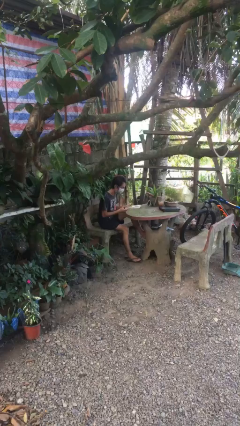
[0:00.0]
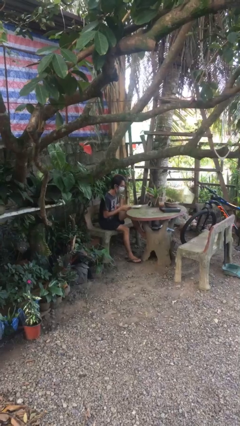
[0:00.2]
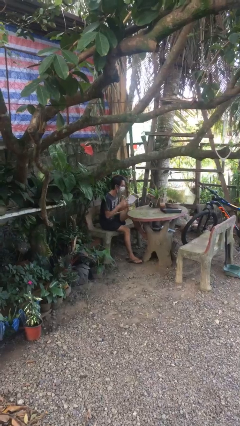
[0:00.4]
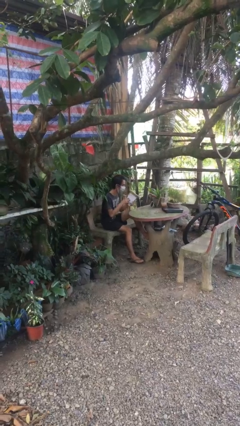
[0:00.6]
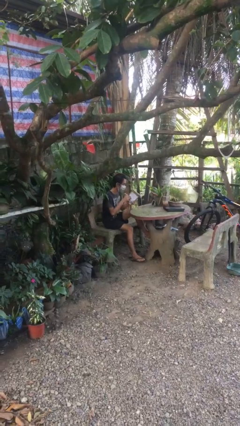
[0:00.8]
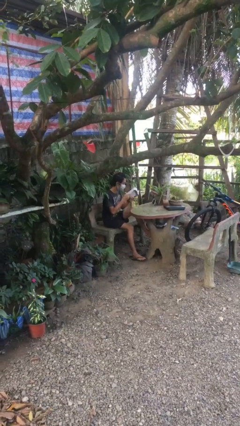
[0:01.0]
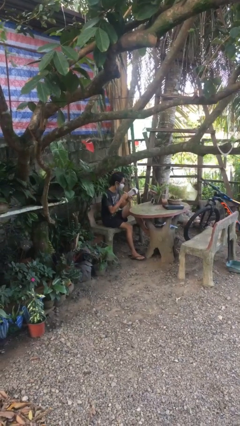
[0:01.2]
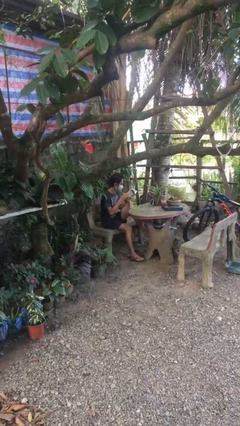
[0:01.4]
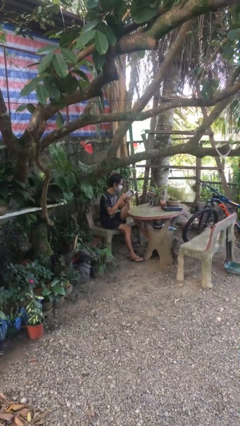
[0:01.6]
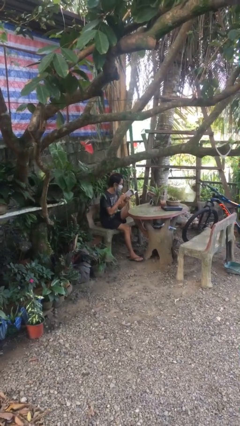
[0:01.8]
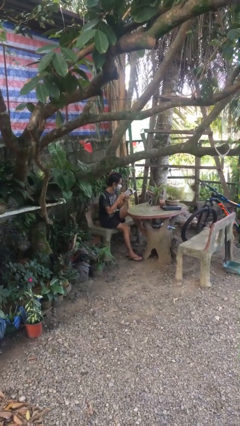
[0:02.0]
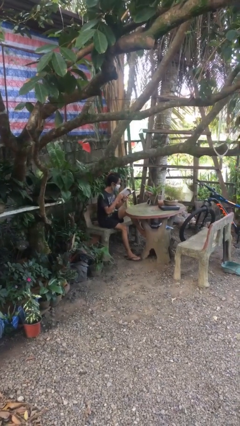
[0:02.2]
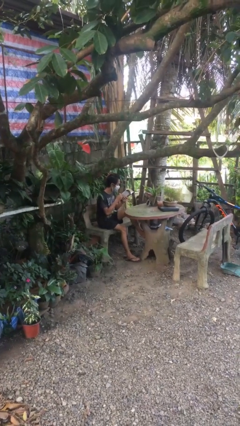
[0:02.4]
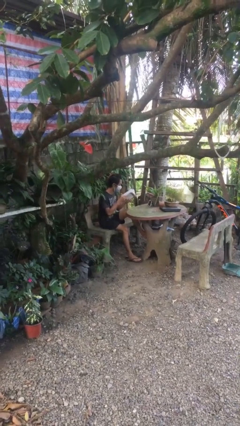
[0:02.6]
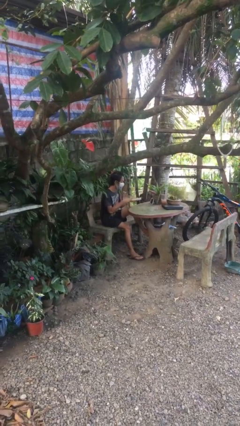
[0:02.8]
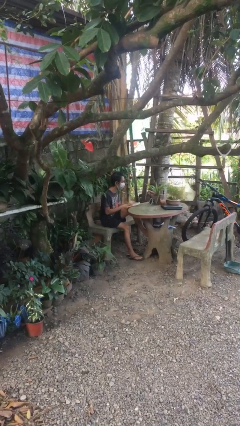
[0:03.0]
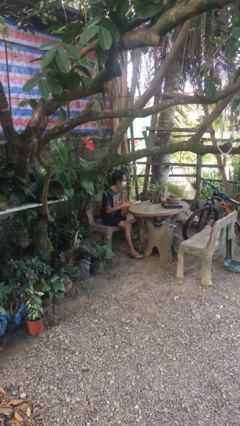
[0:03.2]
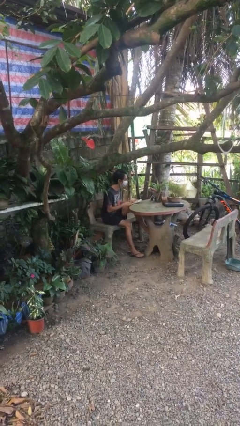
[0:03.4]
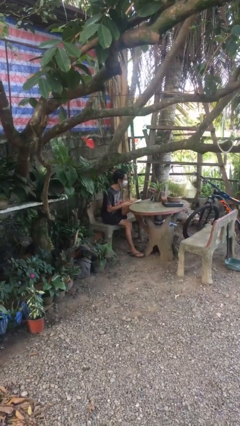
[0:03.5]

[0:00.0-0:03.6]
person reads document

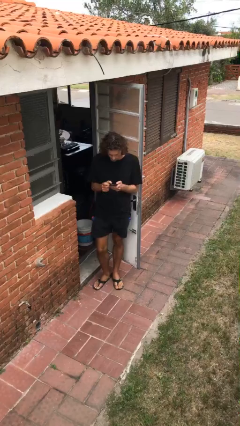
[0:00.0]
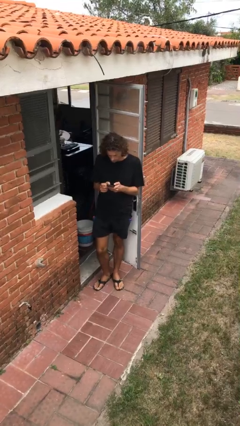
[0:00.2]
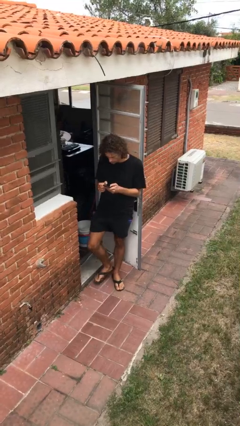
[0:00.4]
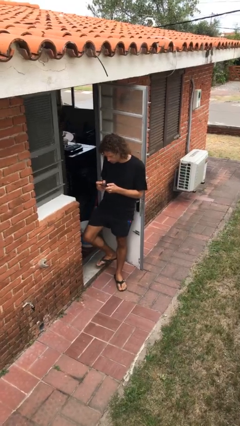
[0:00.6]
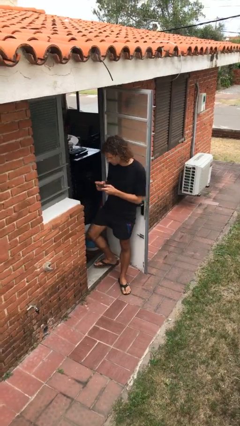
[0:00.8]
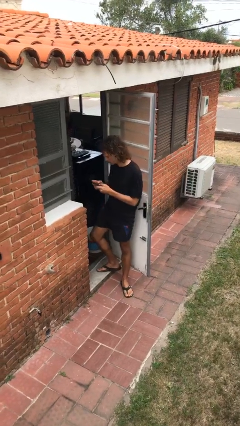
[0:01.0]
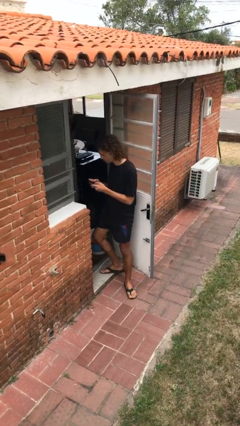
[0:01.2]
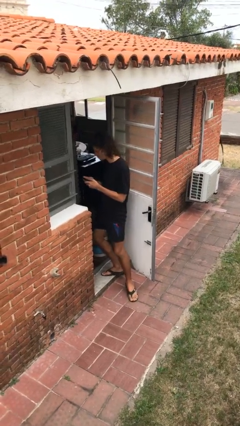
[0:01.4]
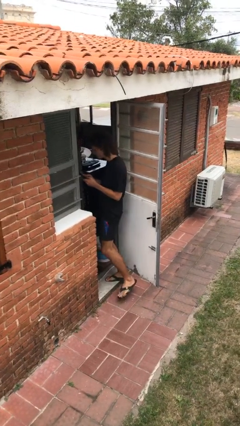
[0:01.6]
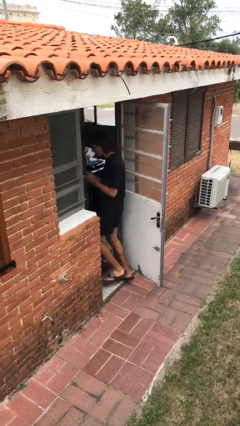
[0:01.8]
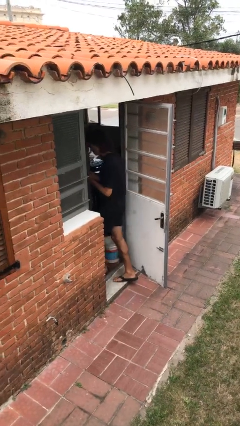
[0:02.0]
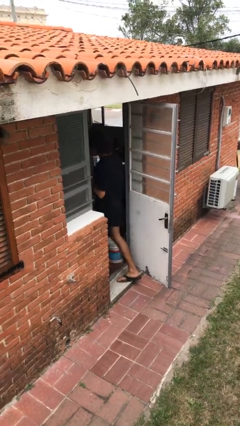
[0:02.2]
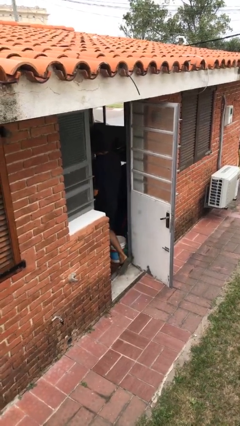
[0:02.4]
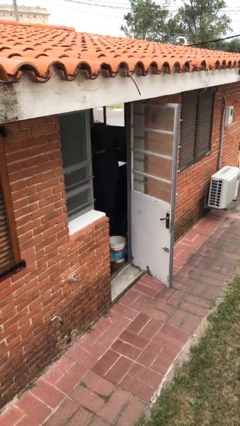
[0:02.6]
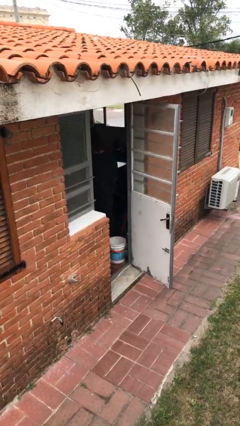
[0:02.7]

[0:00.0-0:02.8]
person exits scene through structure

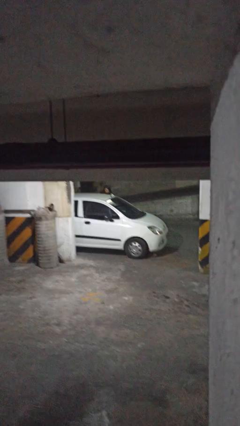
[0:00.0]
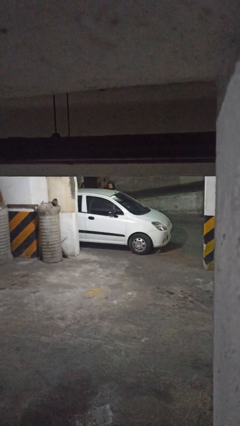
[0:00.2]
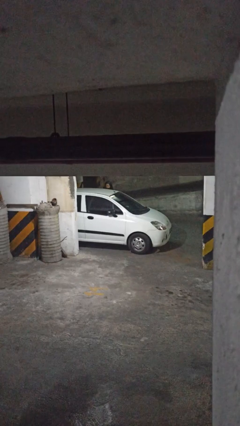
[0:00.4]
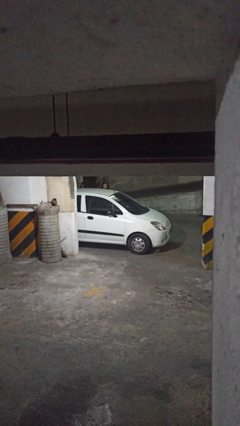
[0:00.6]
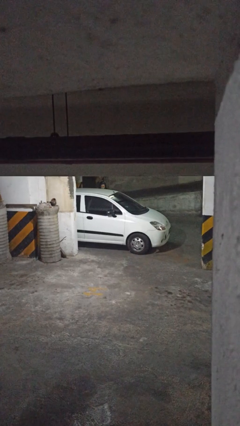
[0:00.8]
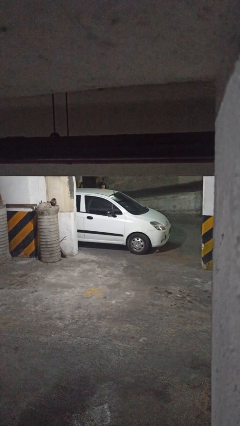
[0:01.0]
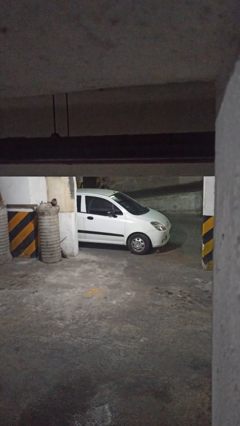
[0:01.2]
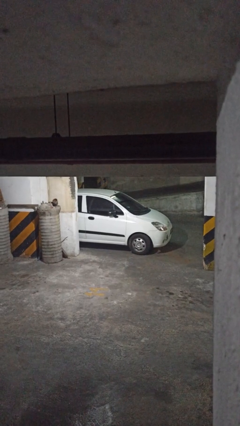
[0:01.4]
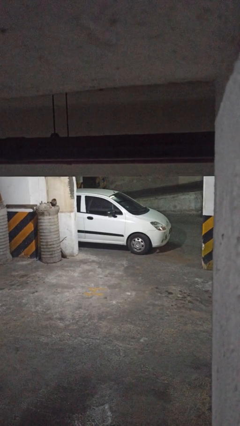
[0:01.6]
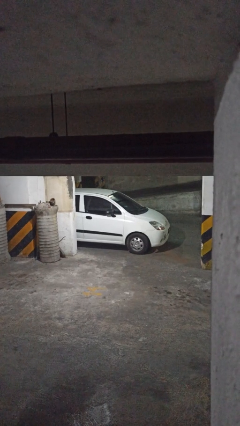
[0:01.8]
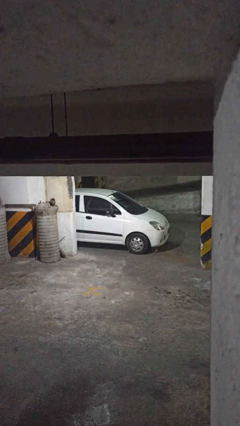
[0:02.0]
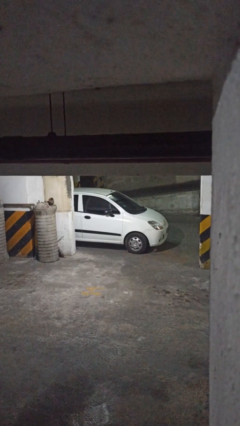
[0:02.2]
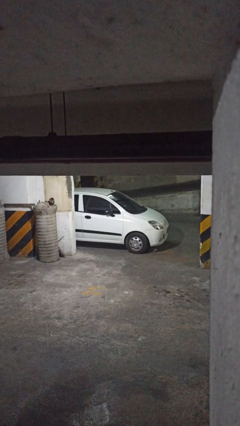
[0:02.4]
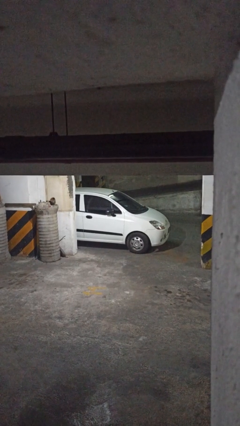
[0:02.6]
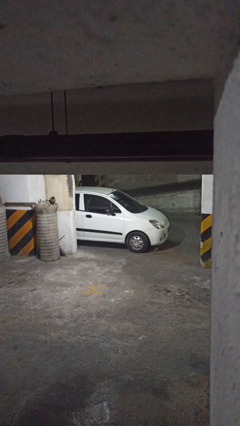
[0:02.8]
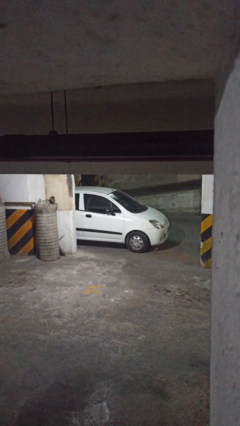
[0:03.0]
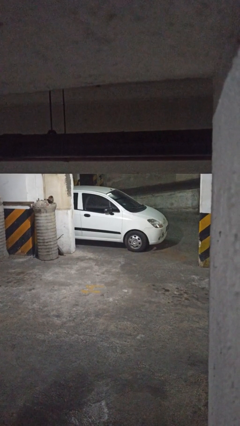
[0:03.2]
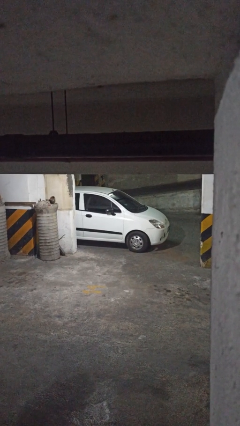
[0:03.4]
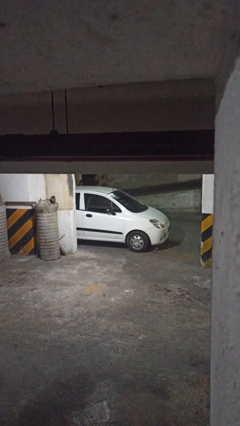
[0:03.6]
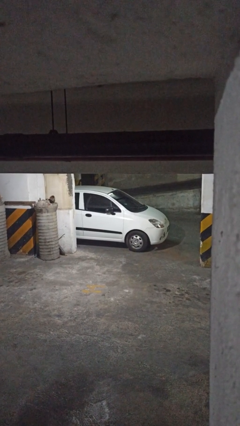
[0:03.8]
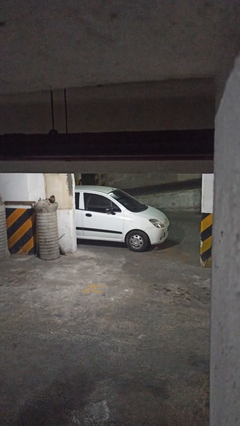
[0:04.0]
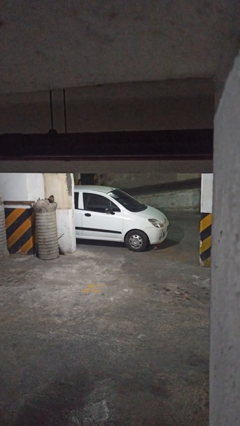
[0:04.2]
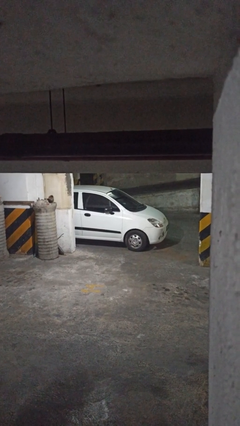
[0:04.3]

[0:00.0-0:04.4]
car picks up person

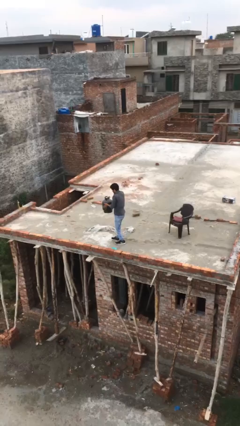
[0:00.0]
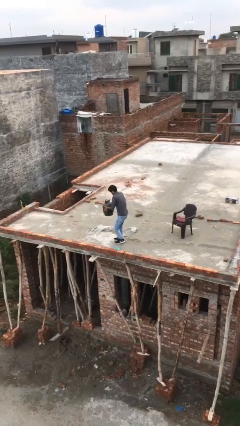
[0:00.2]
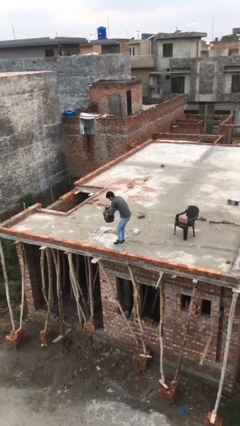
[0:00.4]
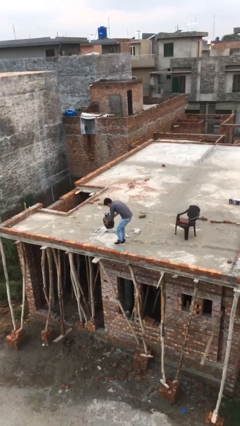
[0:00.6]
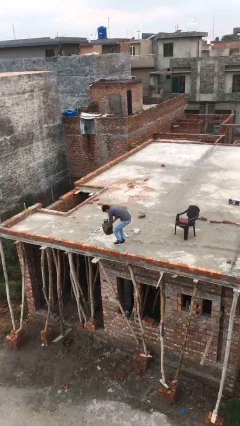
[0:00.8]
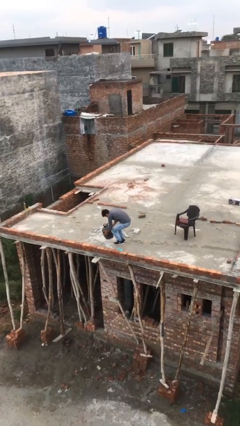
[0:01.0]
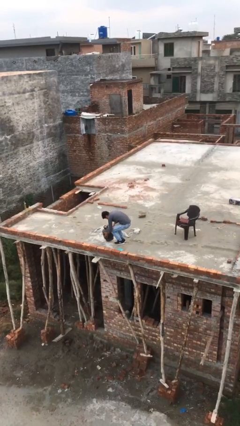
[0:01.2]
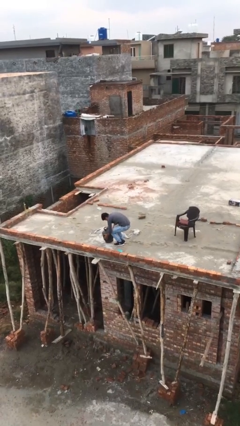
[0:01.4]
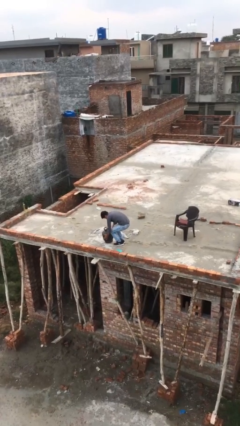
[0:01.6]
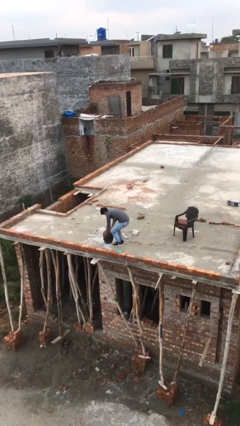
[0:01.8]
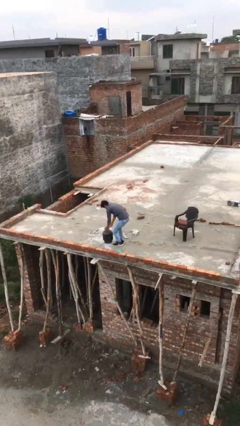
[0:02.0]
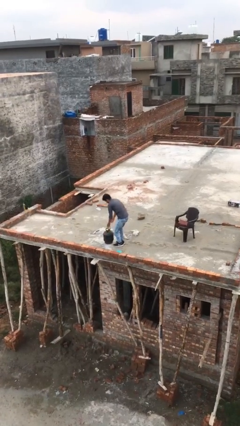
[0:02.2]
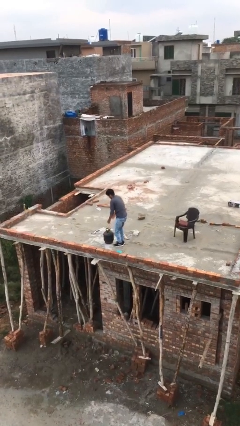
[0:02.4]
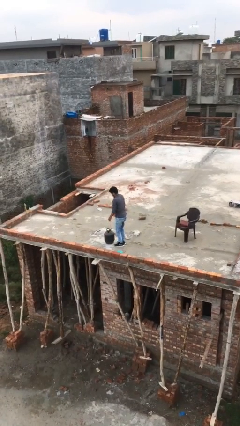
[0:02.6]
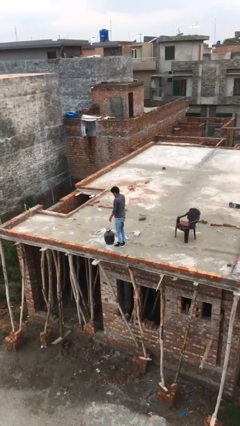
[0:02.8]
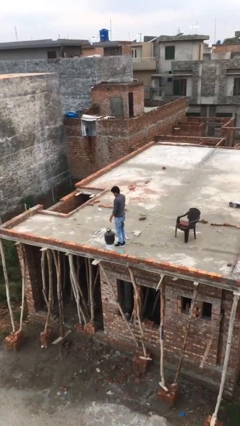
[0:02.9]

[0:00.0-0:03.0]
person puts down object on floor

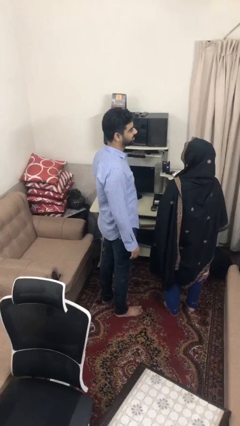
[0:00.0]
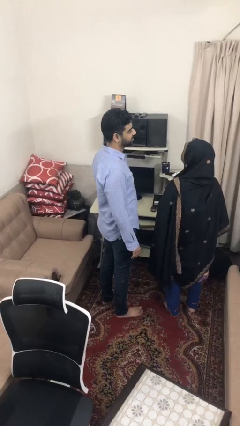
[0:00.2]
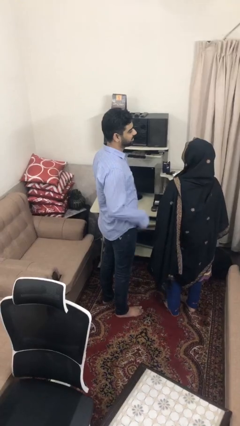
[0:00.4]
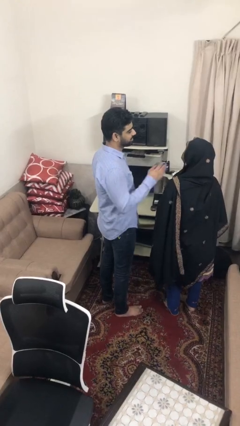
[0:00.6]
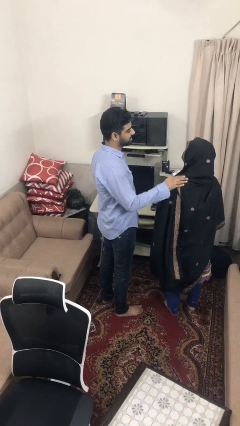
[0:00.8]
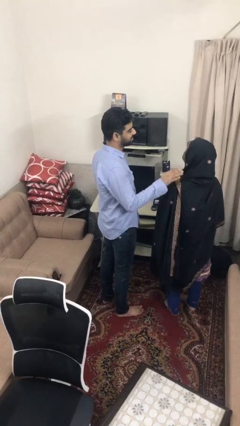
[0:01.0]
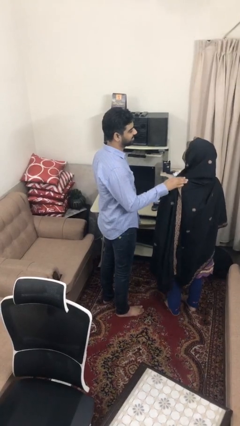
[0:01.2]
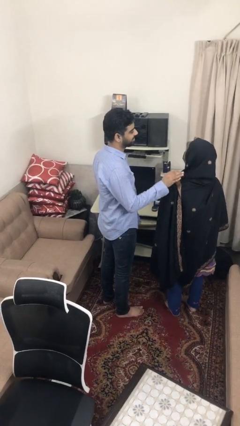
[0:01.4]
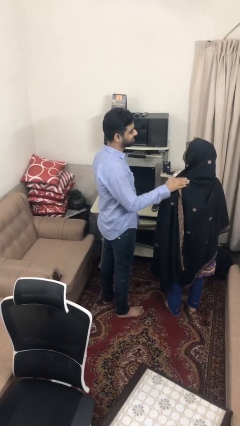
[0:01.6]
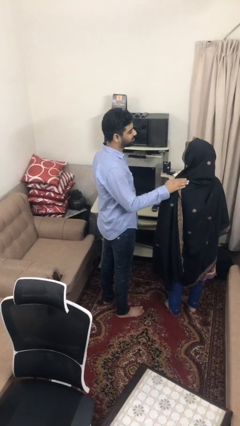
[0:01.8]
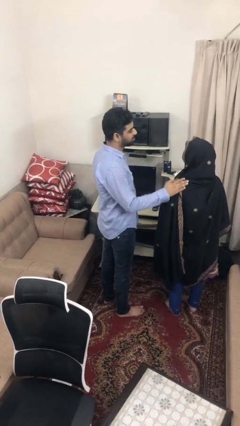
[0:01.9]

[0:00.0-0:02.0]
person pounds shoulders of person

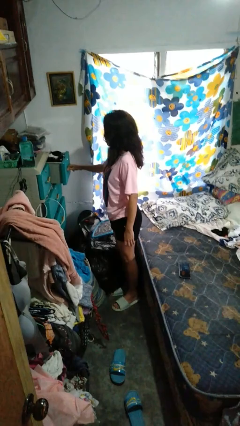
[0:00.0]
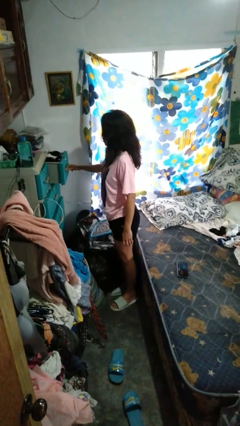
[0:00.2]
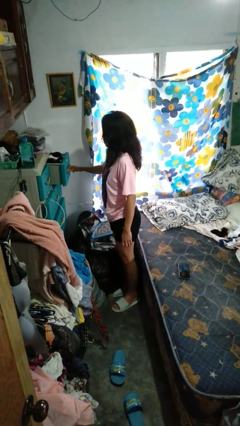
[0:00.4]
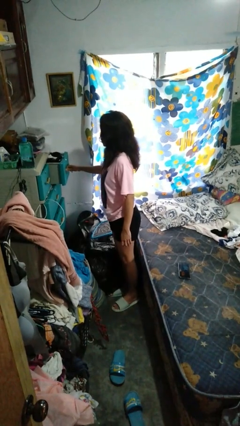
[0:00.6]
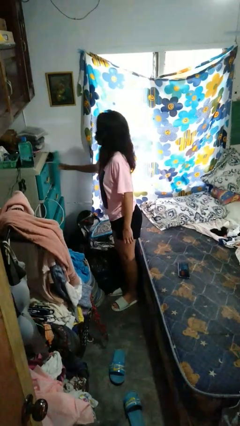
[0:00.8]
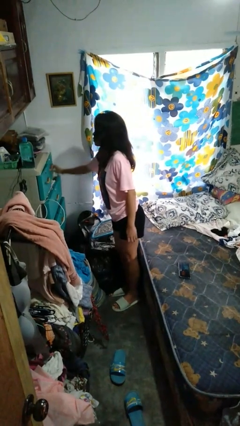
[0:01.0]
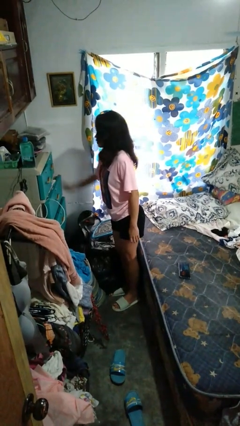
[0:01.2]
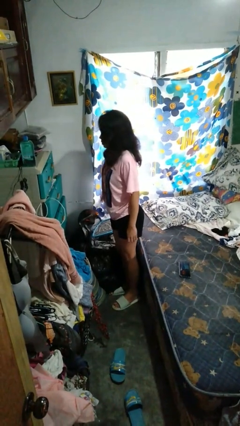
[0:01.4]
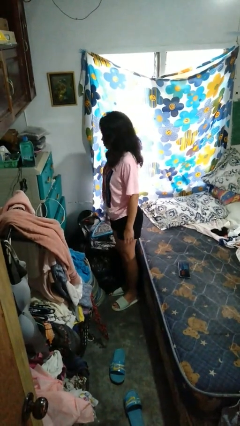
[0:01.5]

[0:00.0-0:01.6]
person closes dresser drawer
